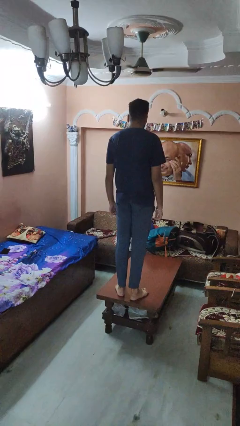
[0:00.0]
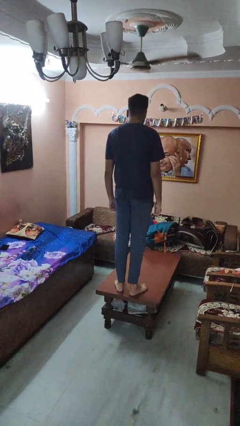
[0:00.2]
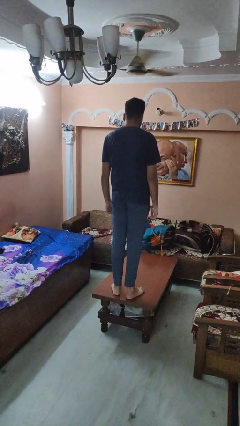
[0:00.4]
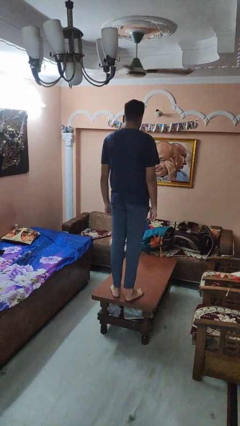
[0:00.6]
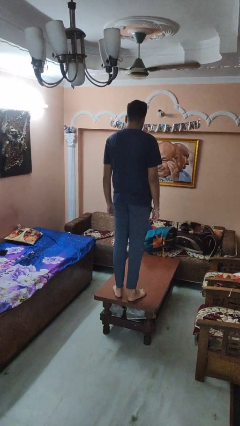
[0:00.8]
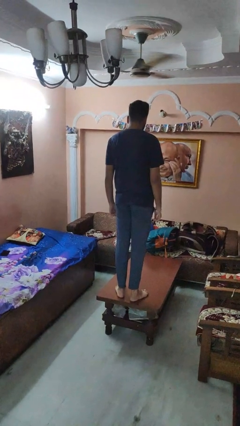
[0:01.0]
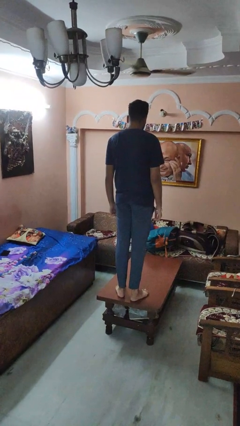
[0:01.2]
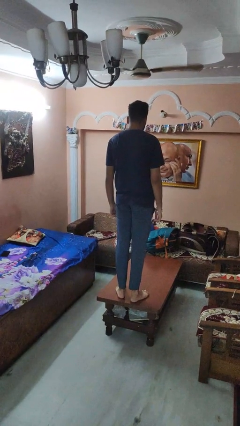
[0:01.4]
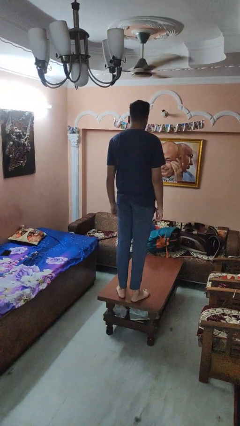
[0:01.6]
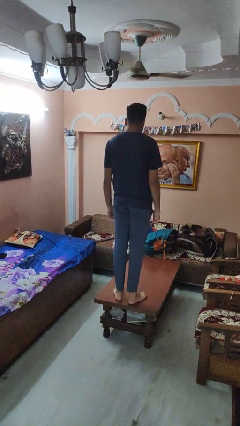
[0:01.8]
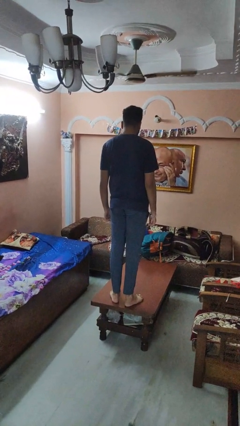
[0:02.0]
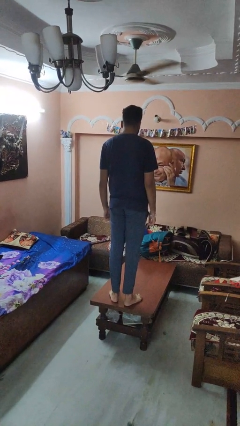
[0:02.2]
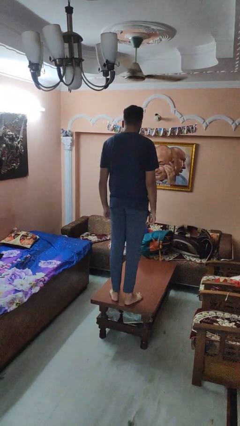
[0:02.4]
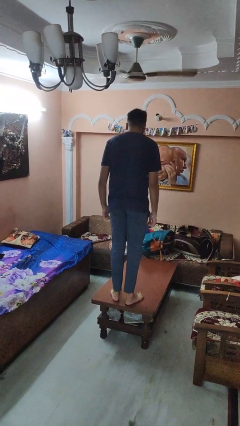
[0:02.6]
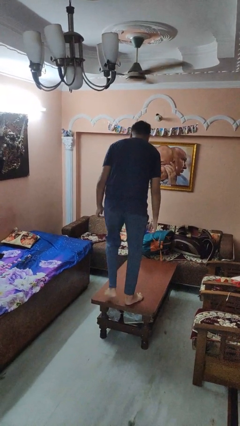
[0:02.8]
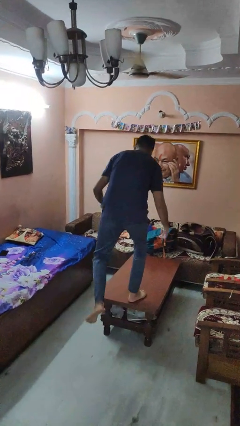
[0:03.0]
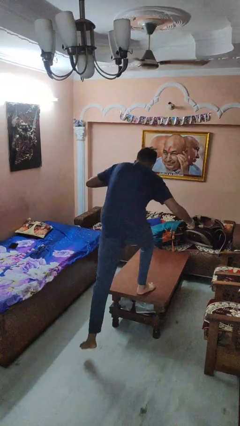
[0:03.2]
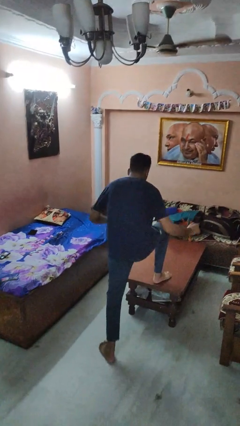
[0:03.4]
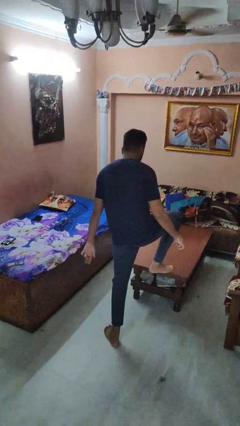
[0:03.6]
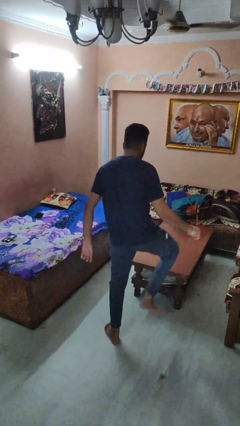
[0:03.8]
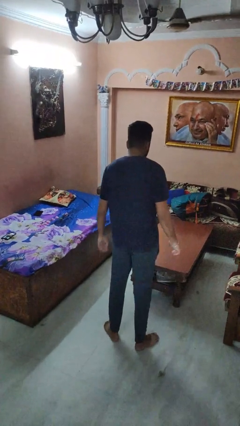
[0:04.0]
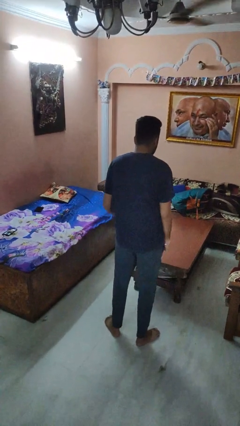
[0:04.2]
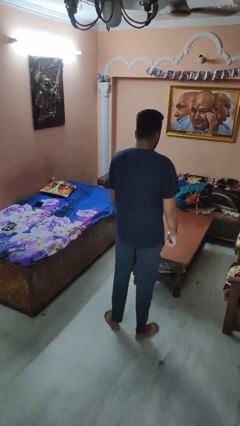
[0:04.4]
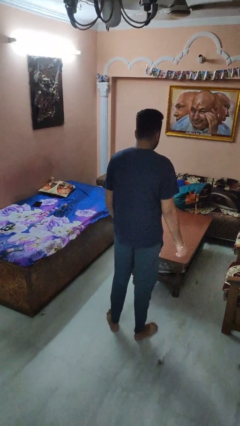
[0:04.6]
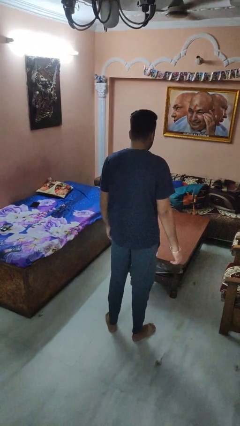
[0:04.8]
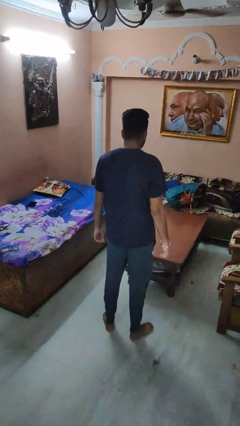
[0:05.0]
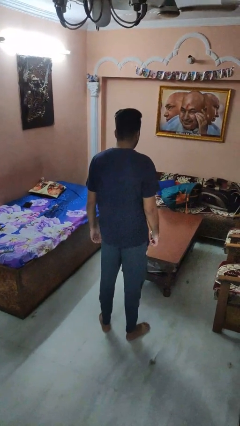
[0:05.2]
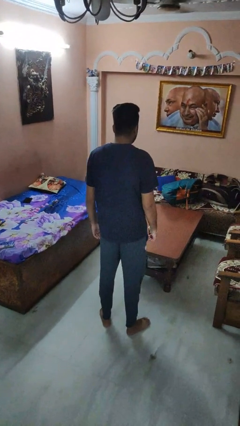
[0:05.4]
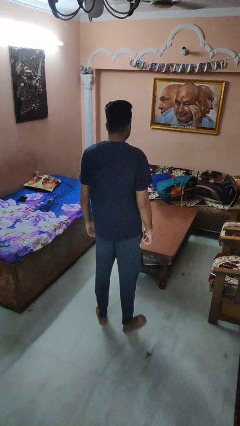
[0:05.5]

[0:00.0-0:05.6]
person climbs off table

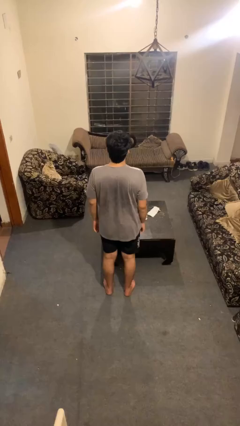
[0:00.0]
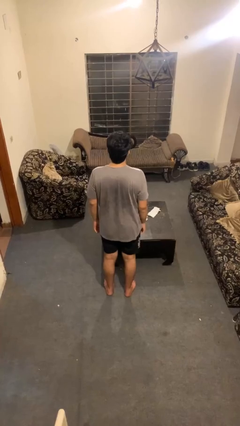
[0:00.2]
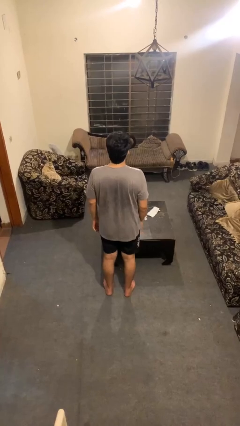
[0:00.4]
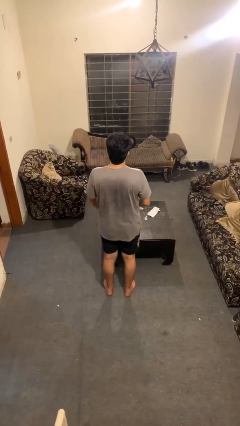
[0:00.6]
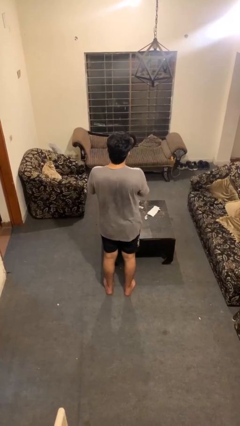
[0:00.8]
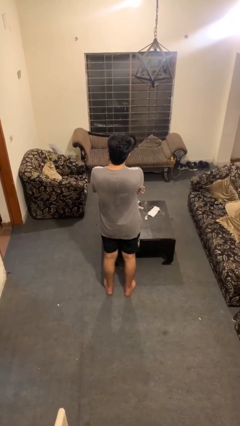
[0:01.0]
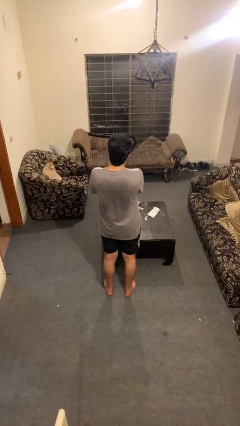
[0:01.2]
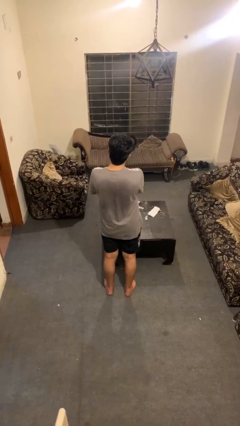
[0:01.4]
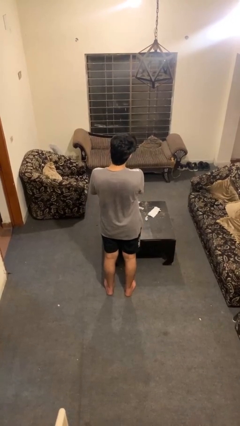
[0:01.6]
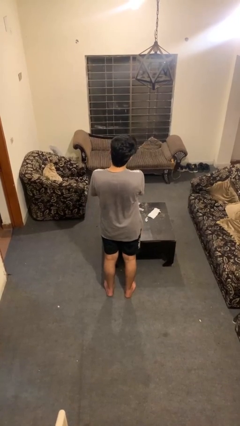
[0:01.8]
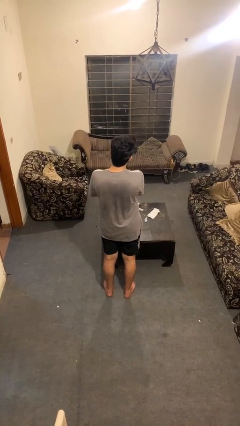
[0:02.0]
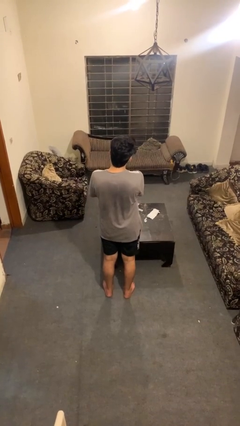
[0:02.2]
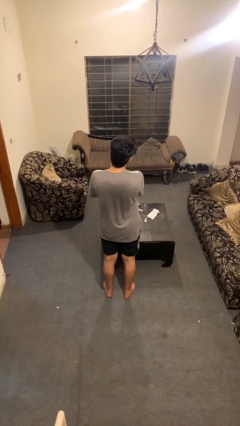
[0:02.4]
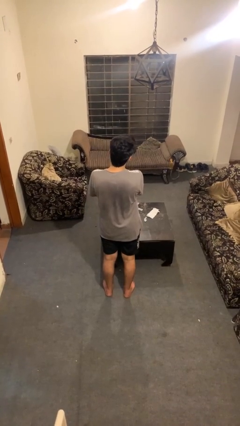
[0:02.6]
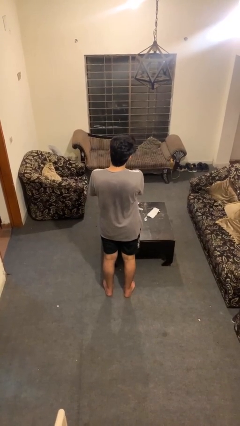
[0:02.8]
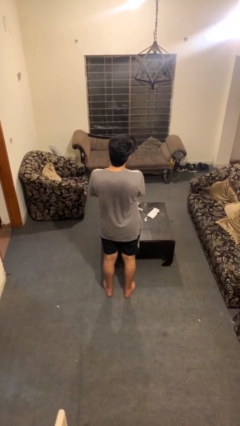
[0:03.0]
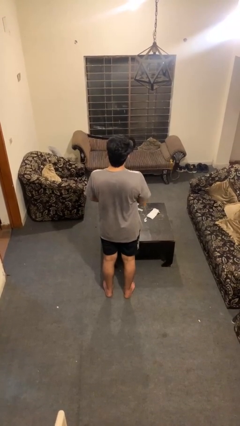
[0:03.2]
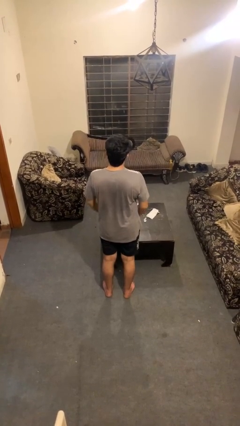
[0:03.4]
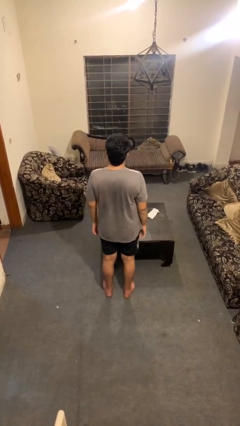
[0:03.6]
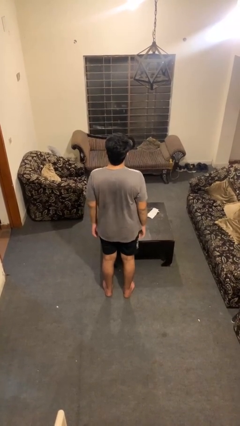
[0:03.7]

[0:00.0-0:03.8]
person strokes chin

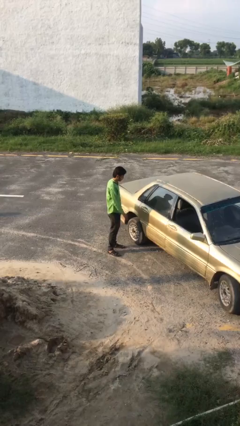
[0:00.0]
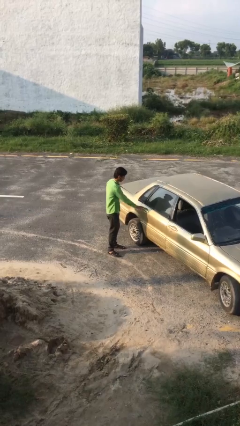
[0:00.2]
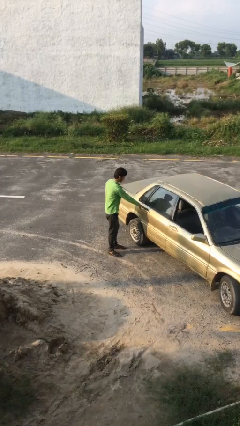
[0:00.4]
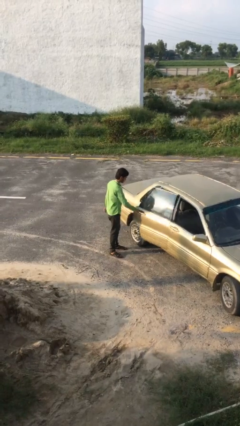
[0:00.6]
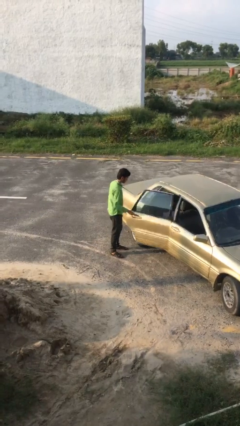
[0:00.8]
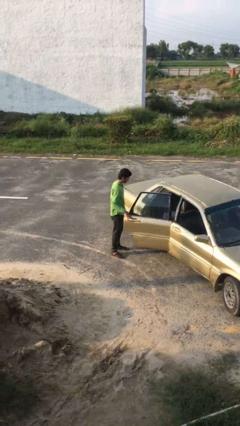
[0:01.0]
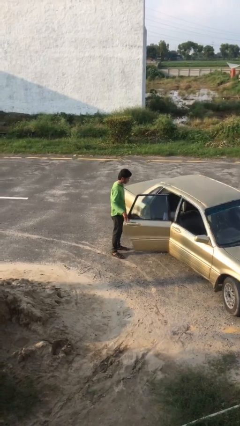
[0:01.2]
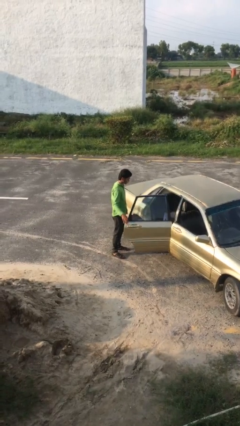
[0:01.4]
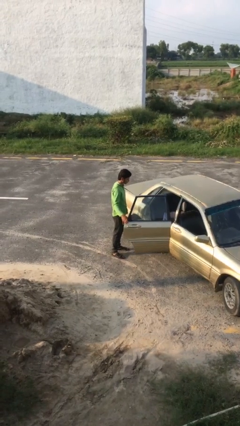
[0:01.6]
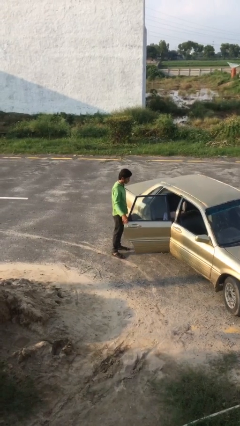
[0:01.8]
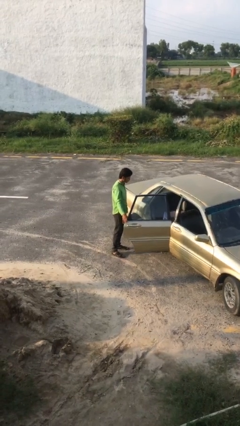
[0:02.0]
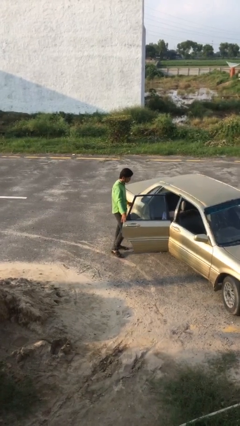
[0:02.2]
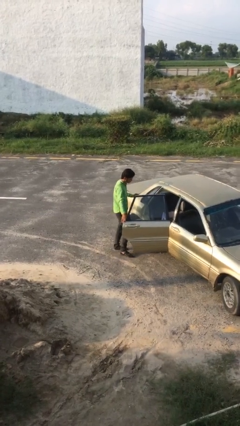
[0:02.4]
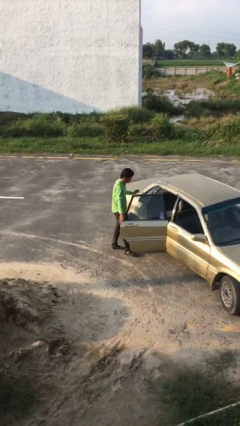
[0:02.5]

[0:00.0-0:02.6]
person opens car door

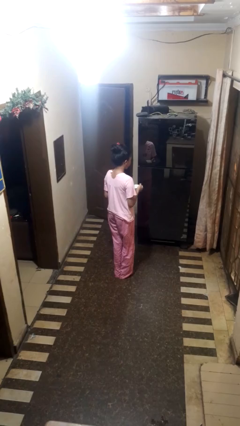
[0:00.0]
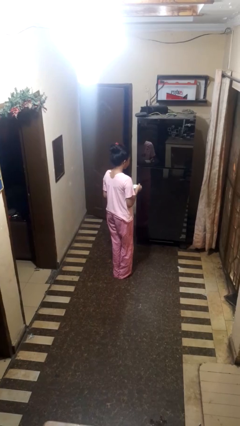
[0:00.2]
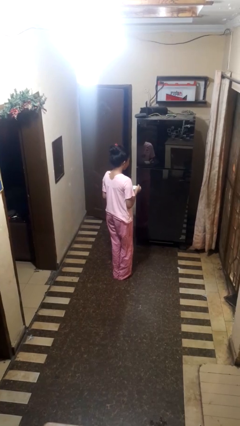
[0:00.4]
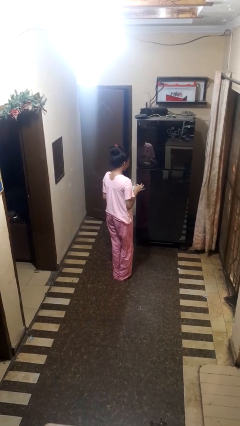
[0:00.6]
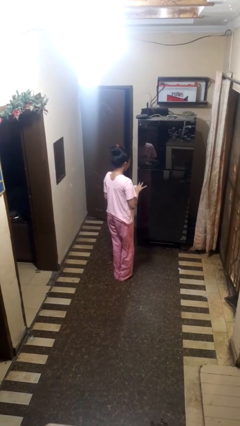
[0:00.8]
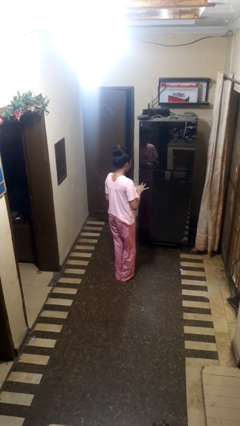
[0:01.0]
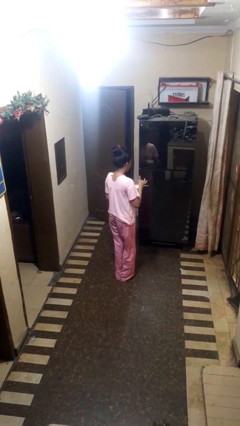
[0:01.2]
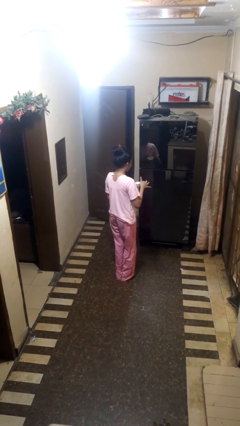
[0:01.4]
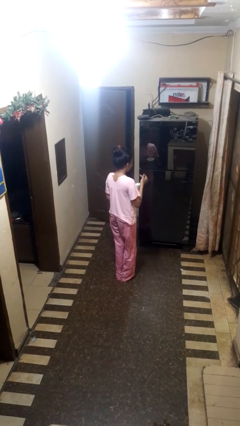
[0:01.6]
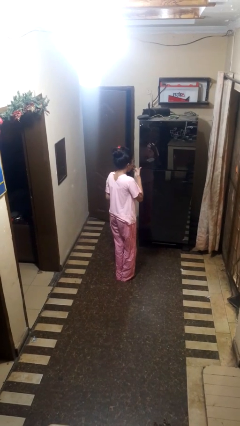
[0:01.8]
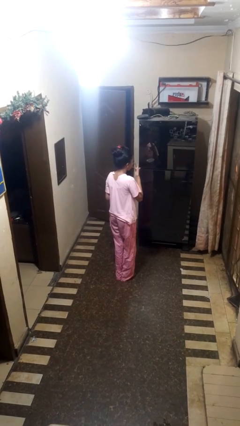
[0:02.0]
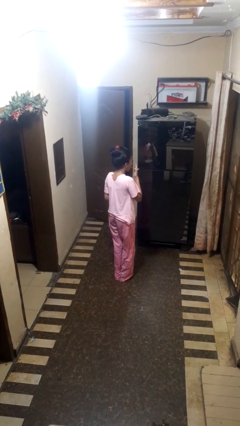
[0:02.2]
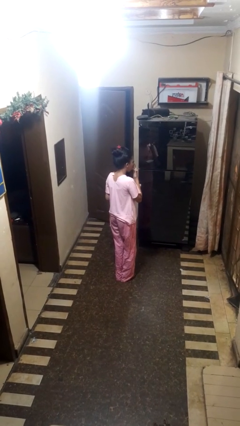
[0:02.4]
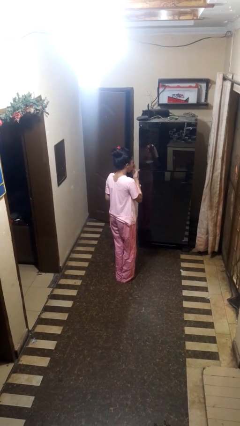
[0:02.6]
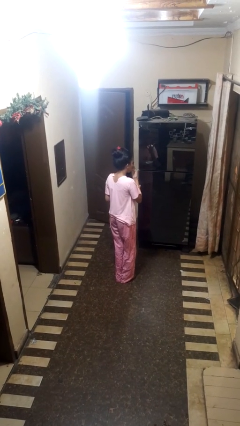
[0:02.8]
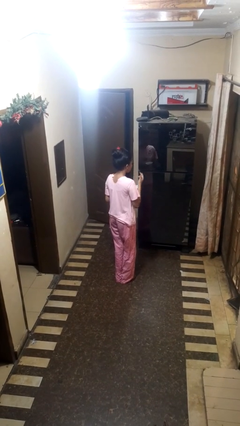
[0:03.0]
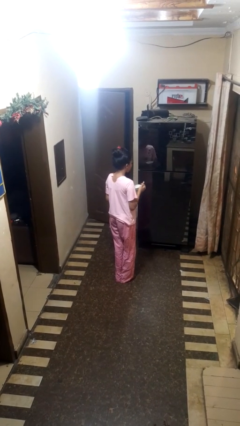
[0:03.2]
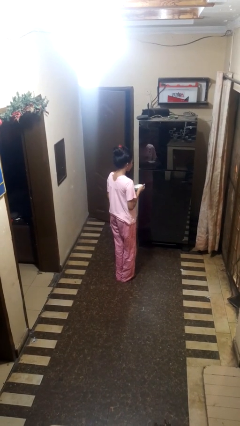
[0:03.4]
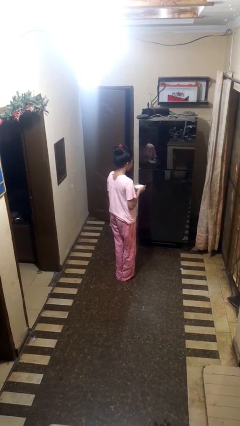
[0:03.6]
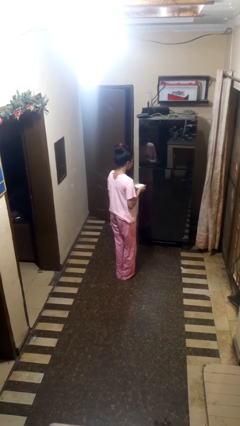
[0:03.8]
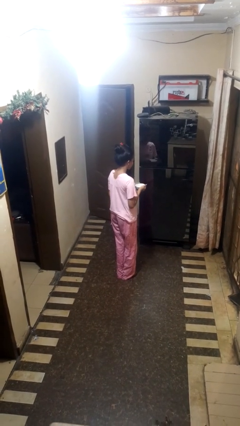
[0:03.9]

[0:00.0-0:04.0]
person licks fingers

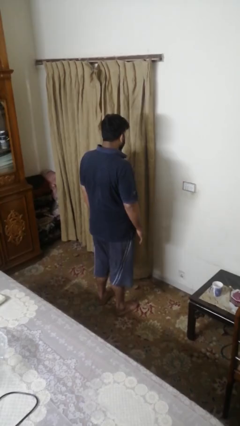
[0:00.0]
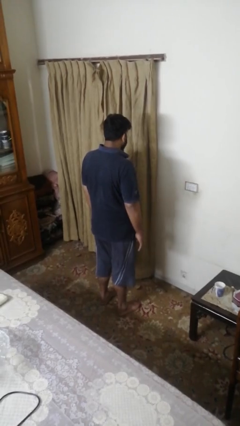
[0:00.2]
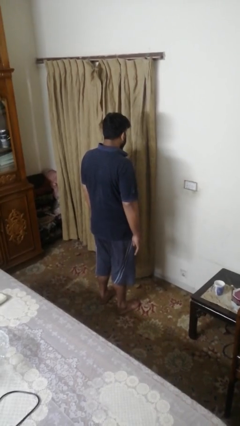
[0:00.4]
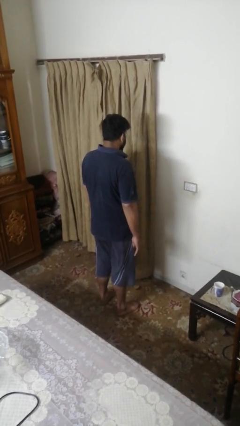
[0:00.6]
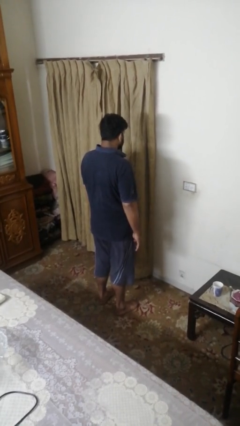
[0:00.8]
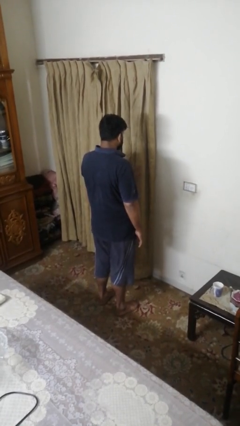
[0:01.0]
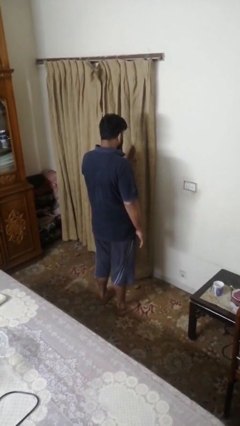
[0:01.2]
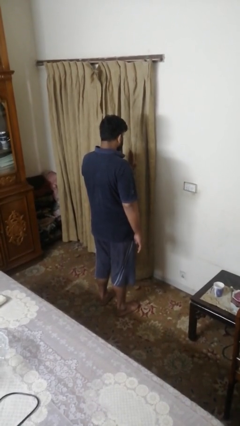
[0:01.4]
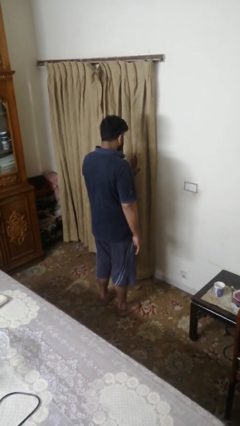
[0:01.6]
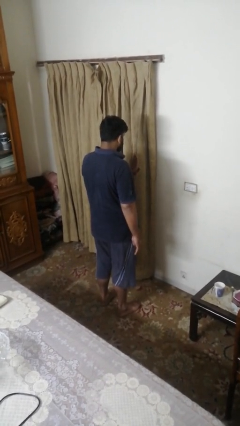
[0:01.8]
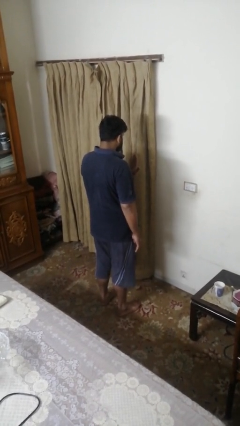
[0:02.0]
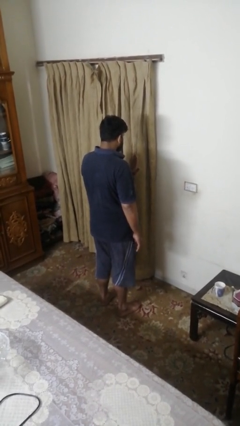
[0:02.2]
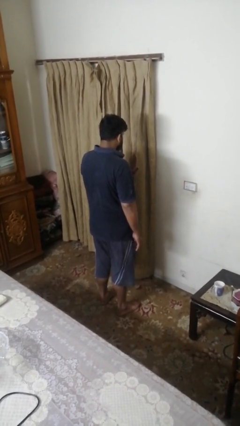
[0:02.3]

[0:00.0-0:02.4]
person gestures stop
